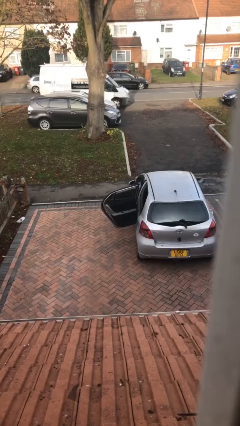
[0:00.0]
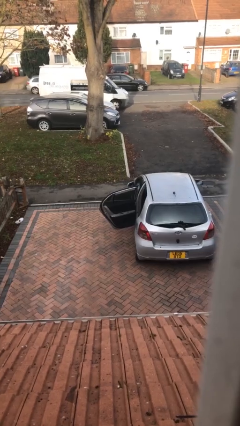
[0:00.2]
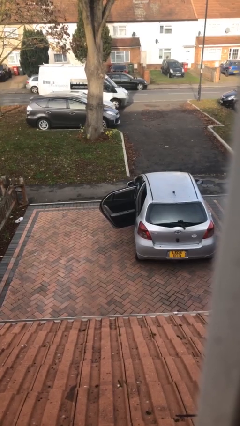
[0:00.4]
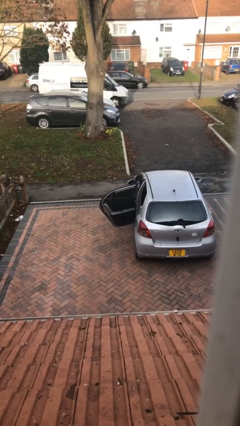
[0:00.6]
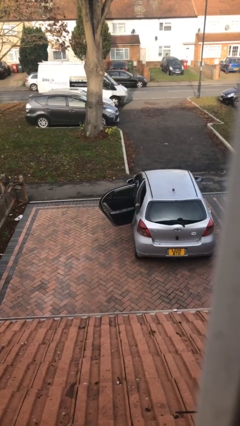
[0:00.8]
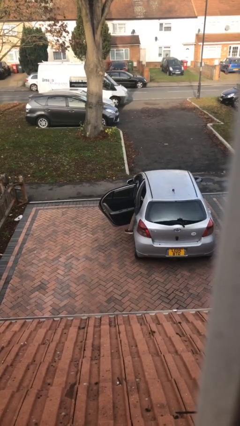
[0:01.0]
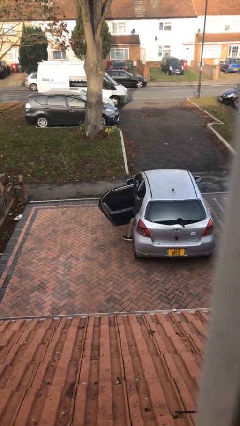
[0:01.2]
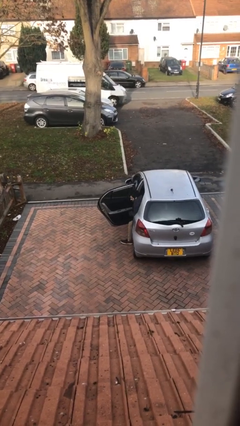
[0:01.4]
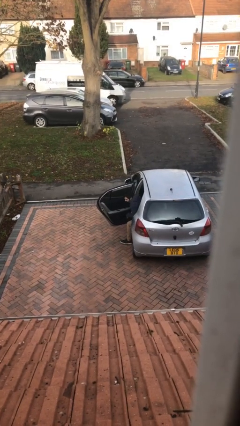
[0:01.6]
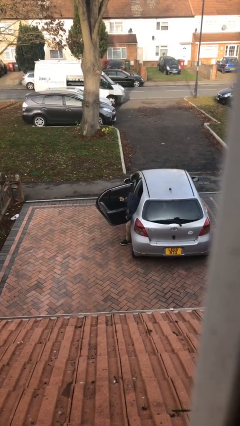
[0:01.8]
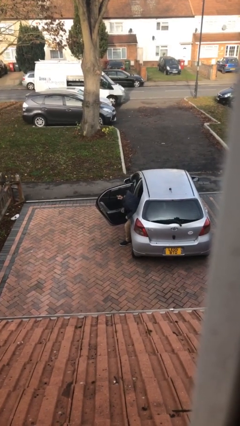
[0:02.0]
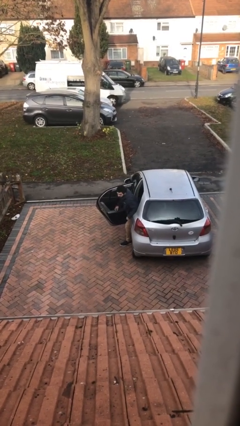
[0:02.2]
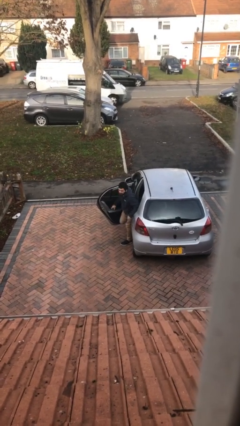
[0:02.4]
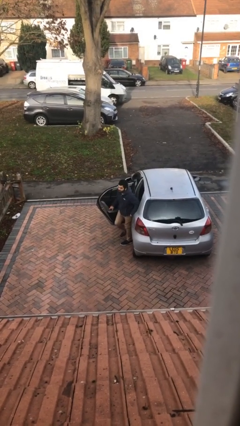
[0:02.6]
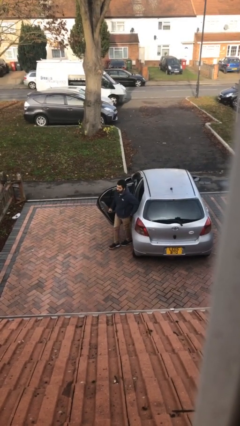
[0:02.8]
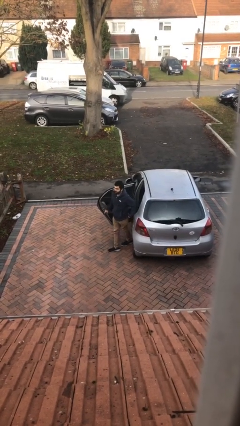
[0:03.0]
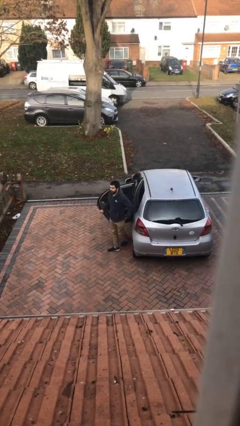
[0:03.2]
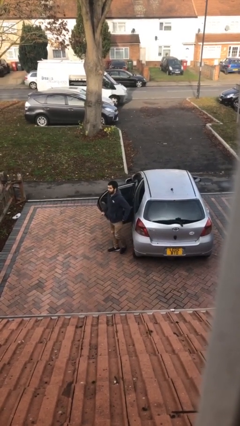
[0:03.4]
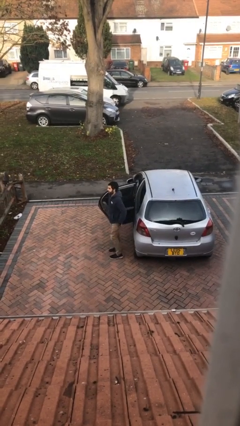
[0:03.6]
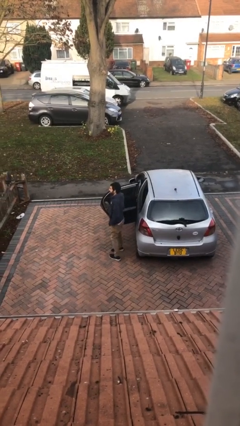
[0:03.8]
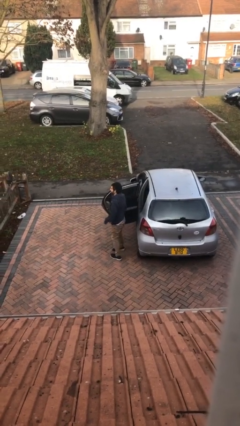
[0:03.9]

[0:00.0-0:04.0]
person exits car

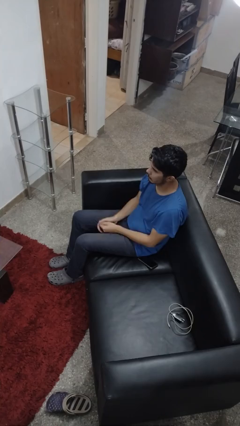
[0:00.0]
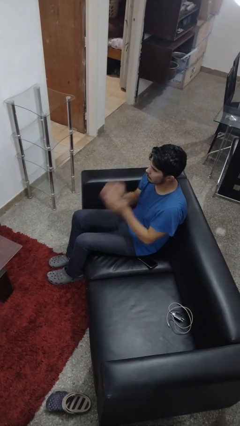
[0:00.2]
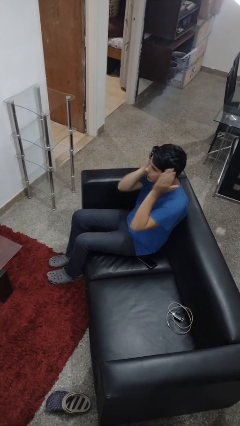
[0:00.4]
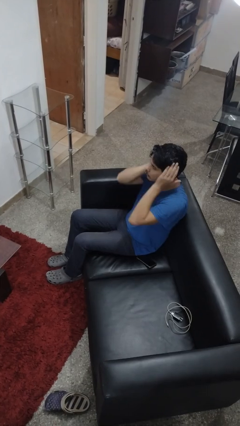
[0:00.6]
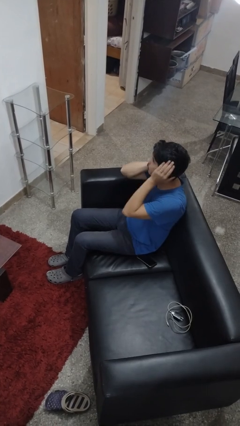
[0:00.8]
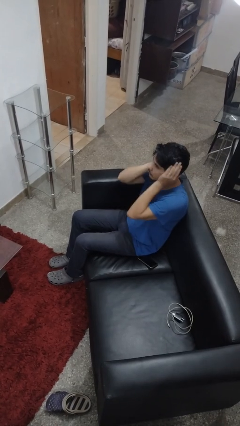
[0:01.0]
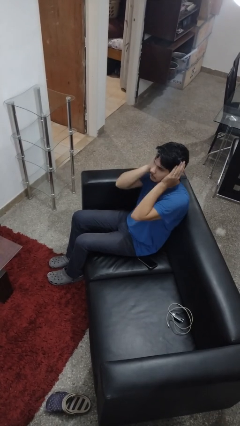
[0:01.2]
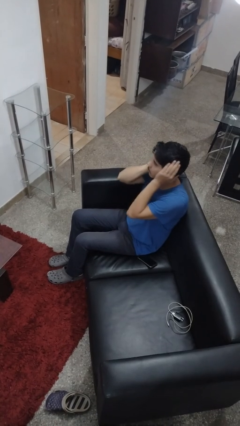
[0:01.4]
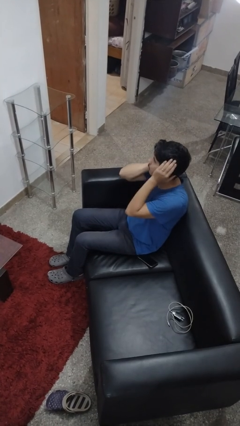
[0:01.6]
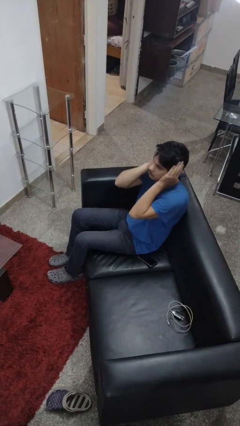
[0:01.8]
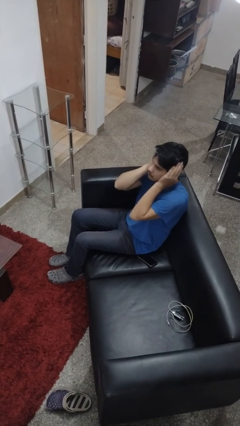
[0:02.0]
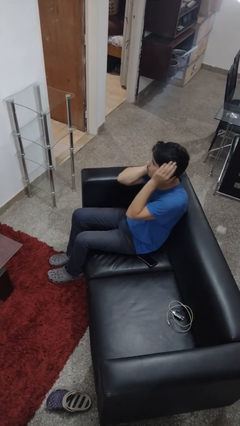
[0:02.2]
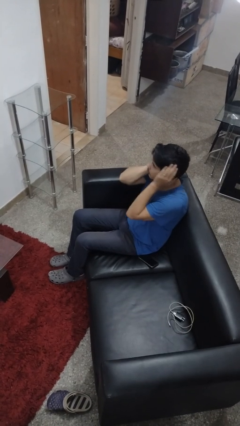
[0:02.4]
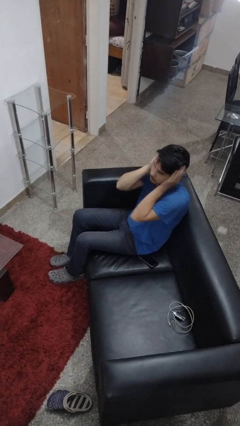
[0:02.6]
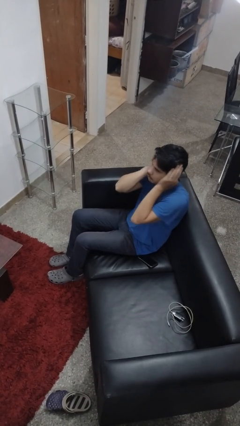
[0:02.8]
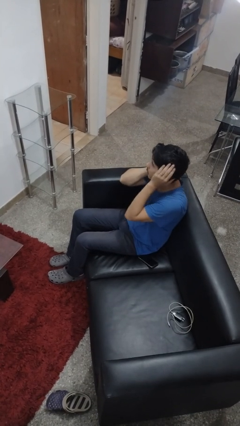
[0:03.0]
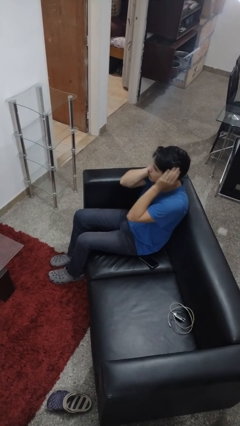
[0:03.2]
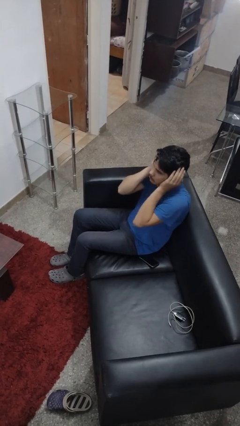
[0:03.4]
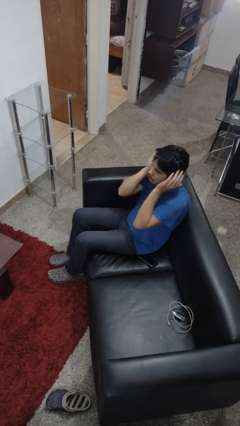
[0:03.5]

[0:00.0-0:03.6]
person puts fingers in ear

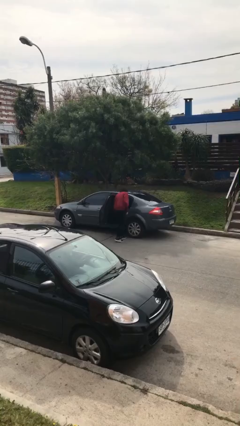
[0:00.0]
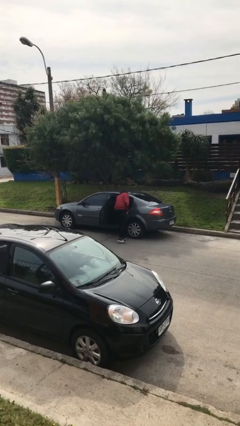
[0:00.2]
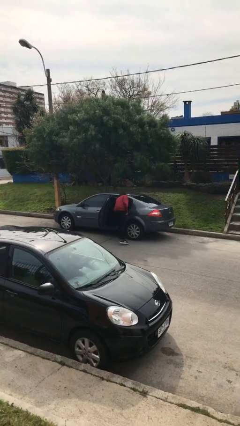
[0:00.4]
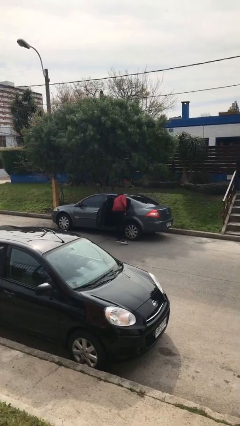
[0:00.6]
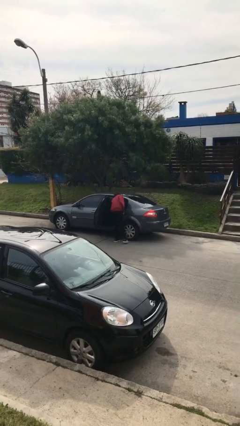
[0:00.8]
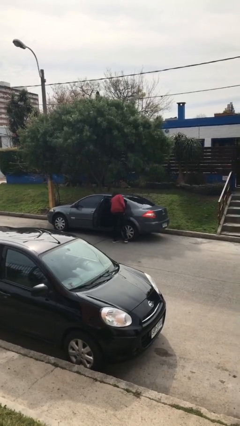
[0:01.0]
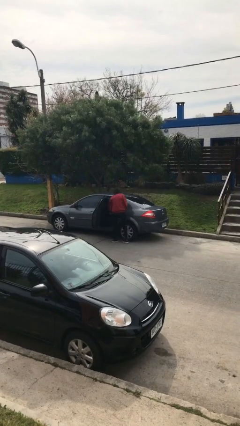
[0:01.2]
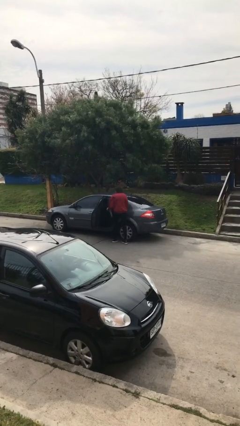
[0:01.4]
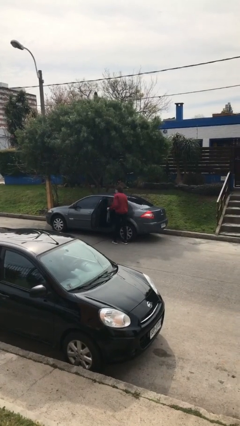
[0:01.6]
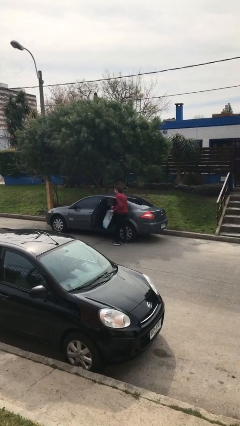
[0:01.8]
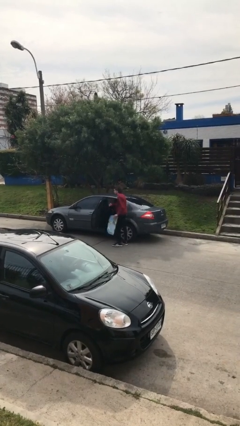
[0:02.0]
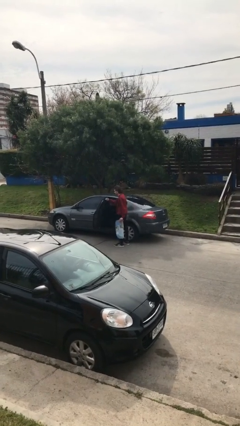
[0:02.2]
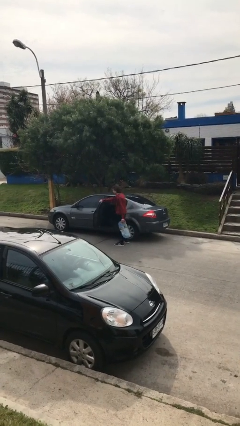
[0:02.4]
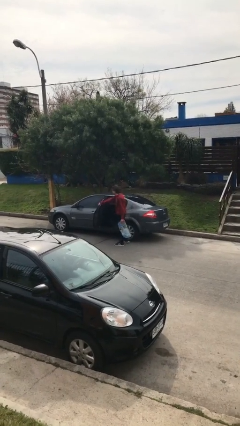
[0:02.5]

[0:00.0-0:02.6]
person unloads car

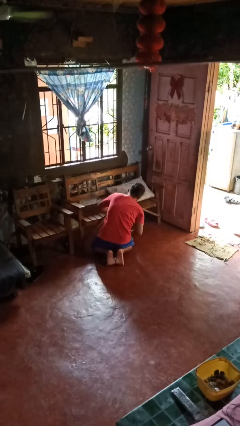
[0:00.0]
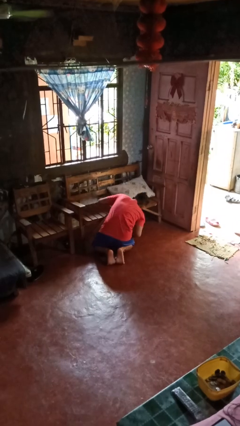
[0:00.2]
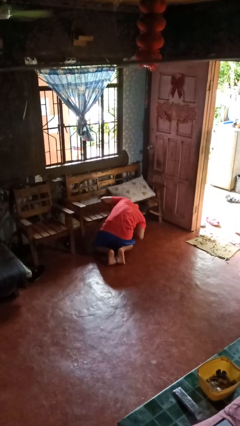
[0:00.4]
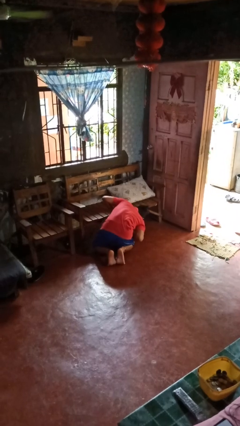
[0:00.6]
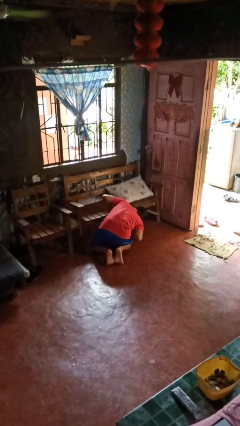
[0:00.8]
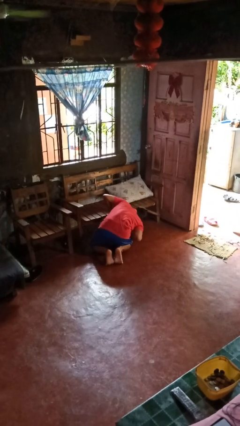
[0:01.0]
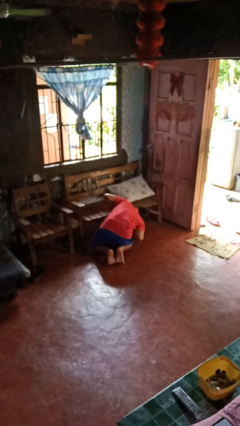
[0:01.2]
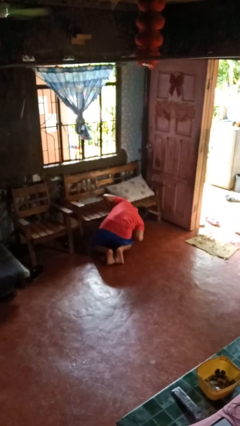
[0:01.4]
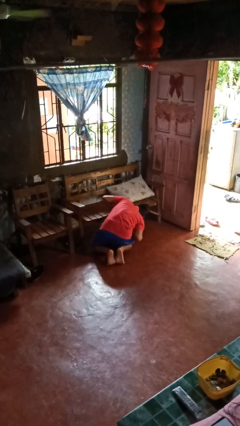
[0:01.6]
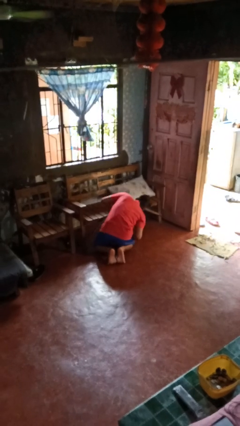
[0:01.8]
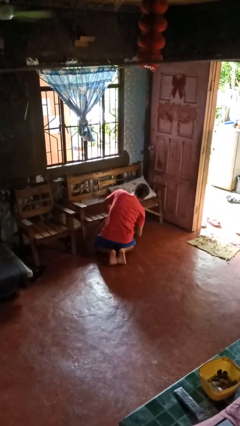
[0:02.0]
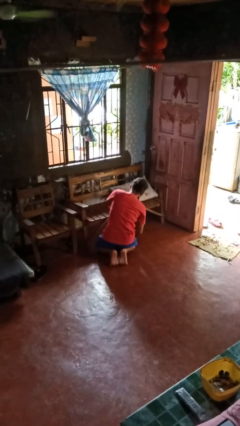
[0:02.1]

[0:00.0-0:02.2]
person searches in couch

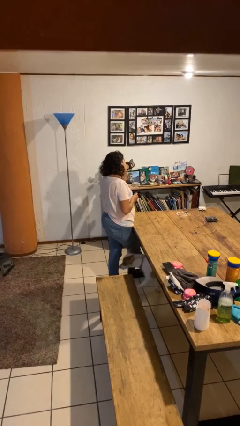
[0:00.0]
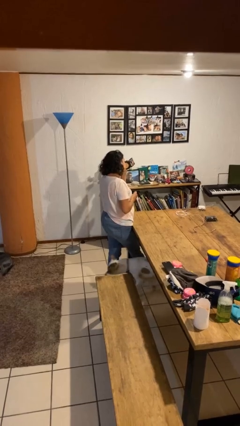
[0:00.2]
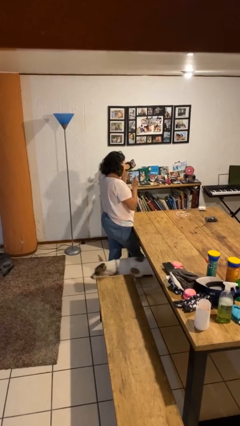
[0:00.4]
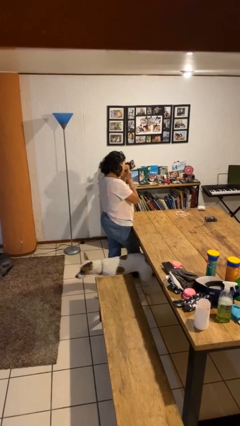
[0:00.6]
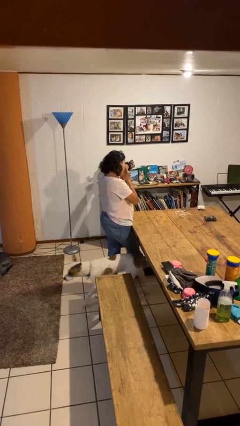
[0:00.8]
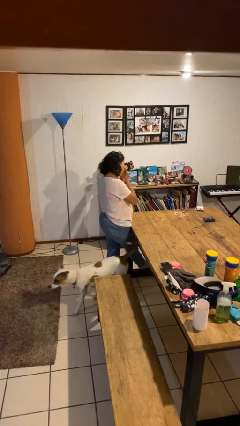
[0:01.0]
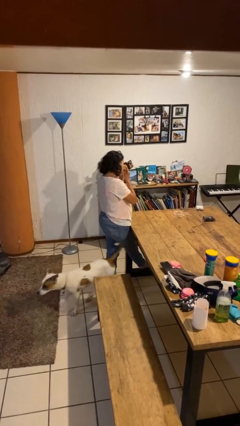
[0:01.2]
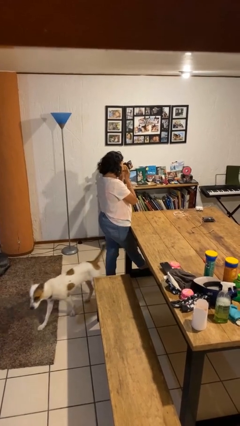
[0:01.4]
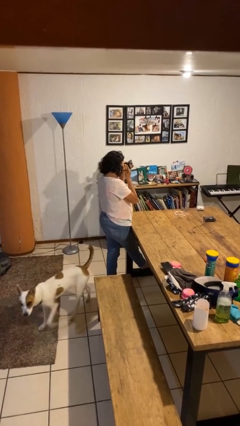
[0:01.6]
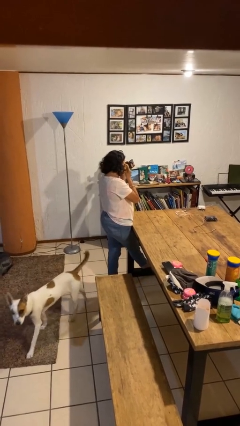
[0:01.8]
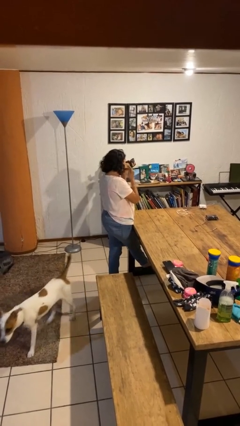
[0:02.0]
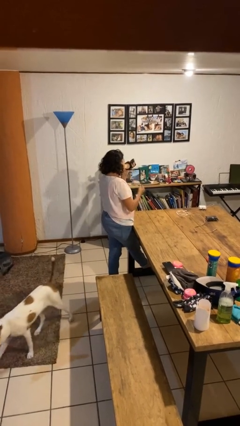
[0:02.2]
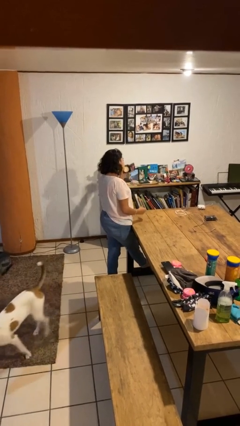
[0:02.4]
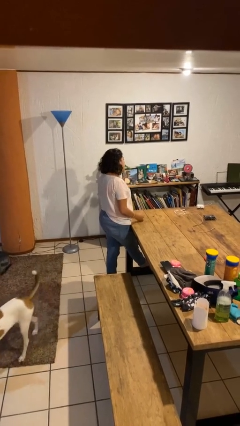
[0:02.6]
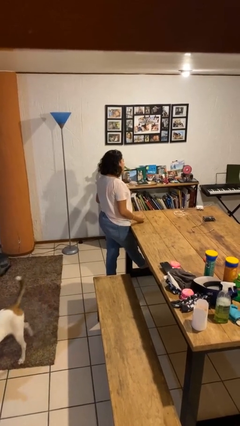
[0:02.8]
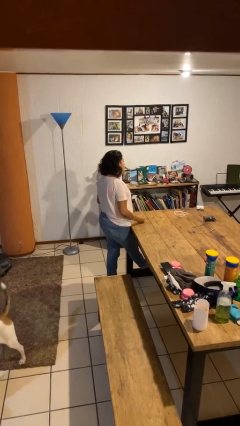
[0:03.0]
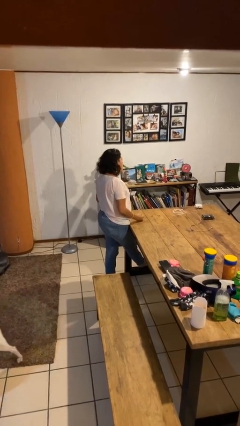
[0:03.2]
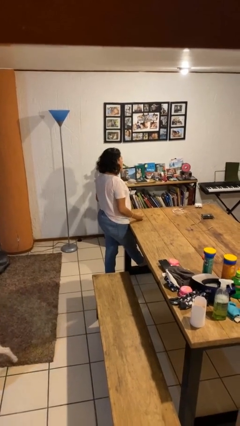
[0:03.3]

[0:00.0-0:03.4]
person applies foundation makeup

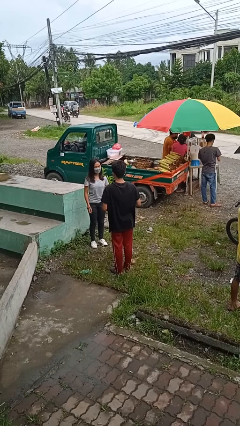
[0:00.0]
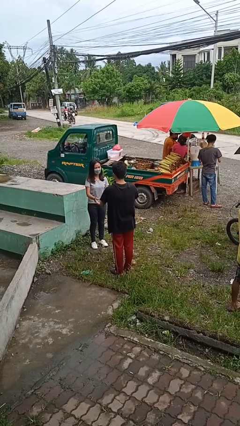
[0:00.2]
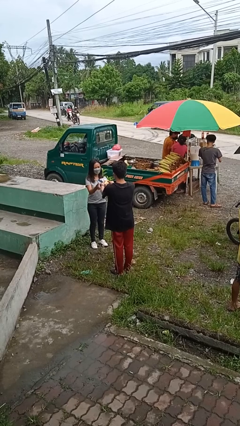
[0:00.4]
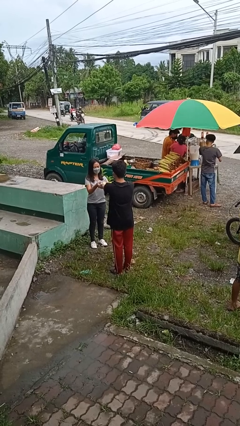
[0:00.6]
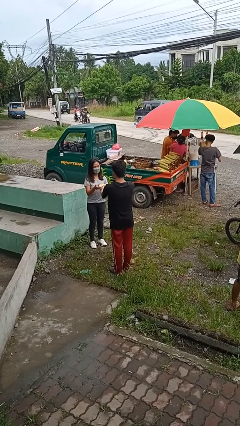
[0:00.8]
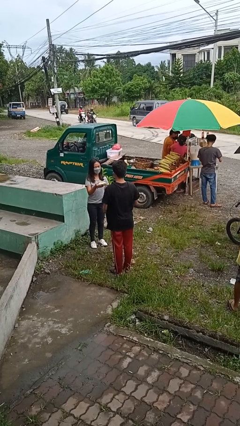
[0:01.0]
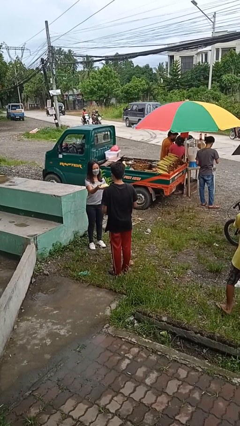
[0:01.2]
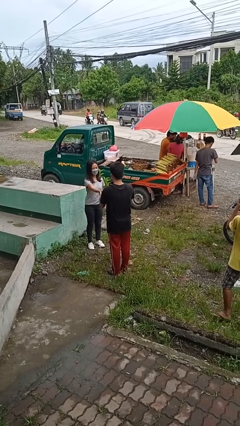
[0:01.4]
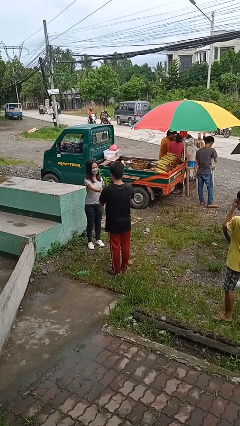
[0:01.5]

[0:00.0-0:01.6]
person transfers object to person
